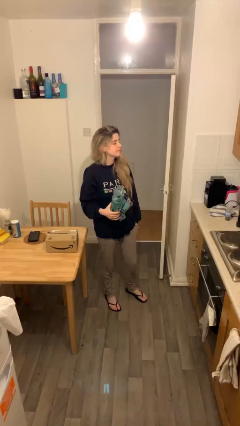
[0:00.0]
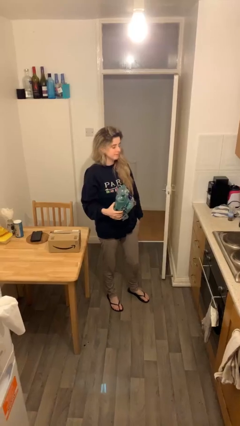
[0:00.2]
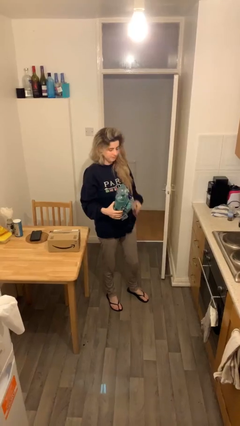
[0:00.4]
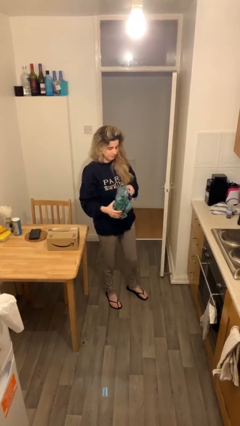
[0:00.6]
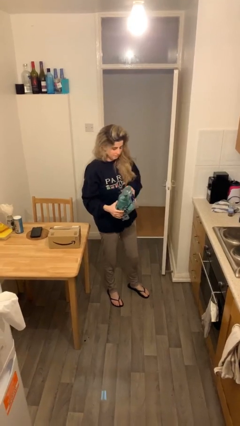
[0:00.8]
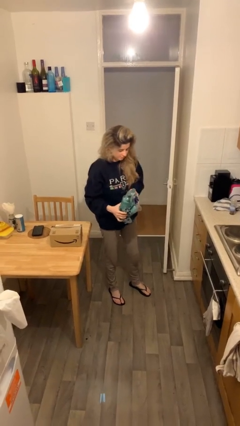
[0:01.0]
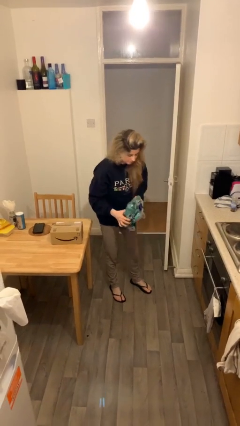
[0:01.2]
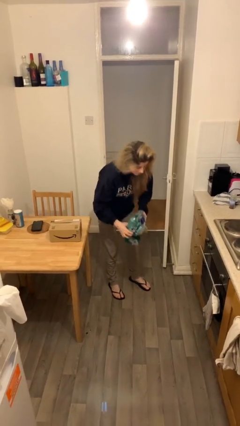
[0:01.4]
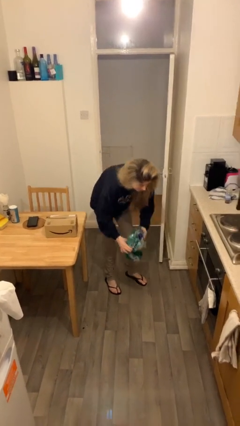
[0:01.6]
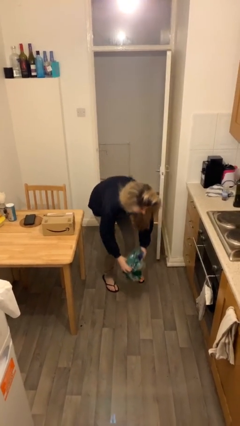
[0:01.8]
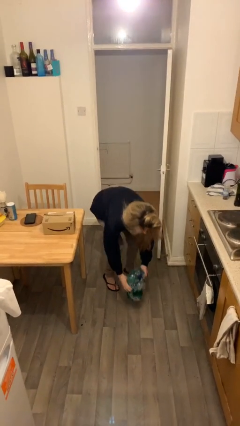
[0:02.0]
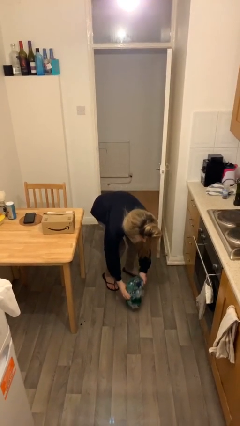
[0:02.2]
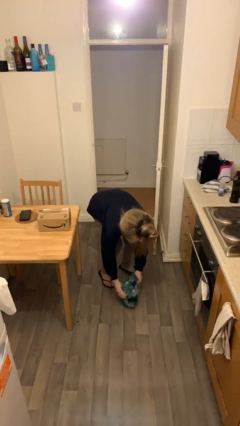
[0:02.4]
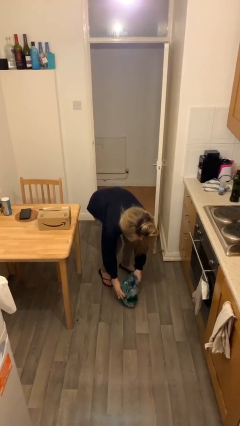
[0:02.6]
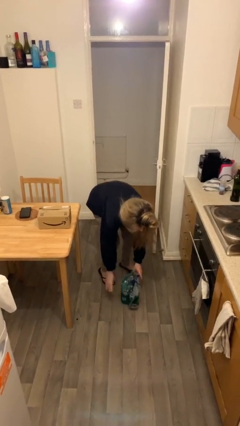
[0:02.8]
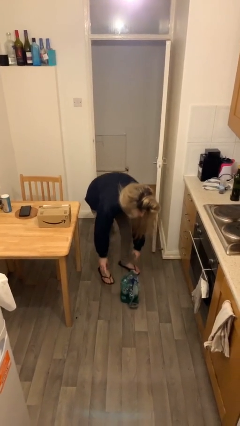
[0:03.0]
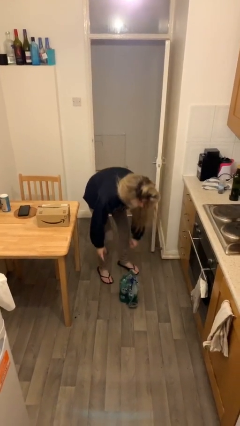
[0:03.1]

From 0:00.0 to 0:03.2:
person puts down object on floor

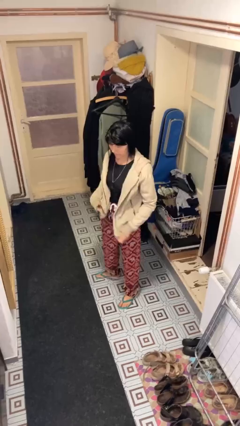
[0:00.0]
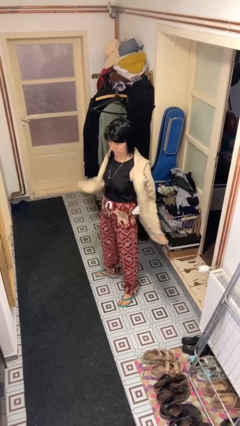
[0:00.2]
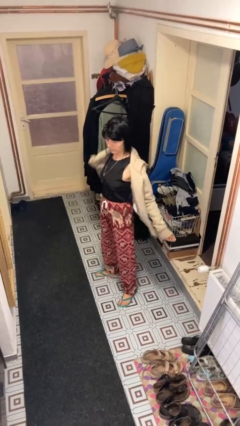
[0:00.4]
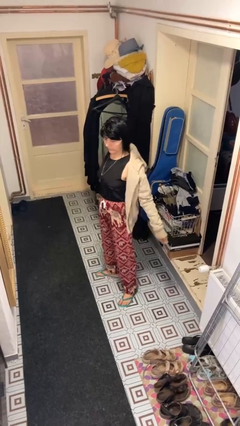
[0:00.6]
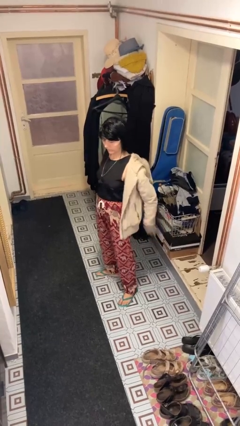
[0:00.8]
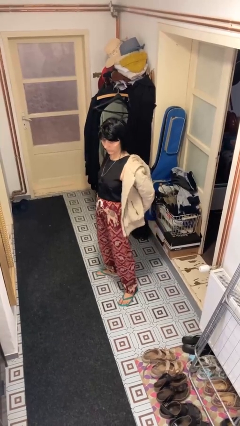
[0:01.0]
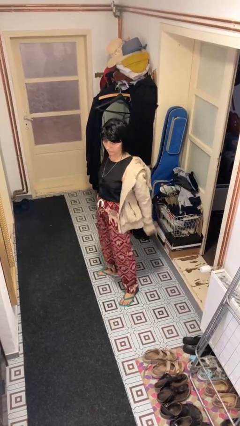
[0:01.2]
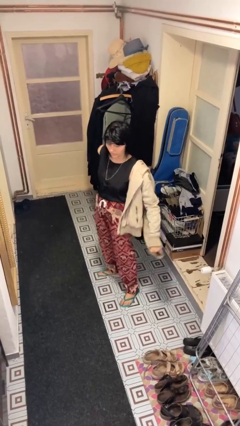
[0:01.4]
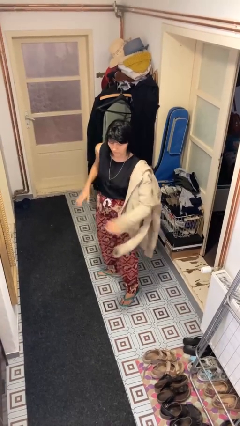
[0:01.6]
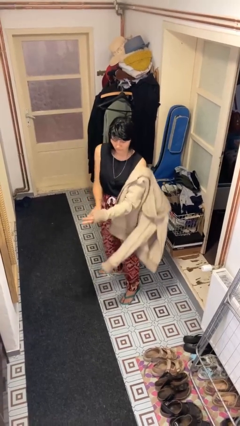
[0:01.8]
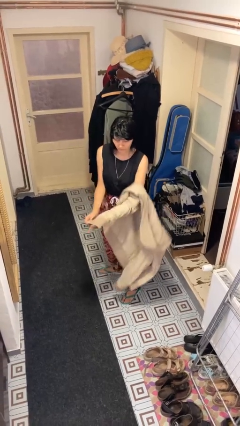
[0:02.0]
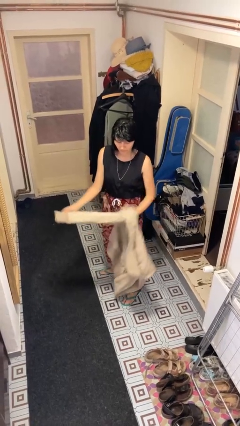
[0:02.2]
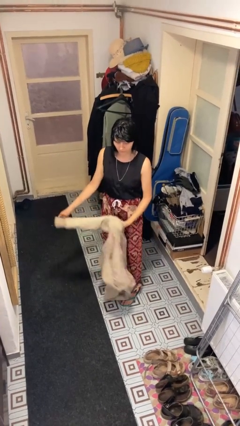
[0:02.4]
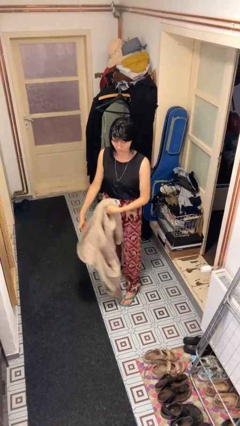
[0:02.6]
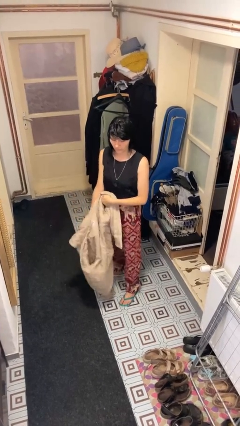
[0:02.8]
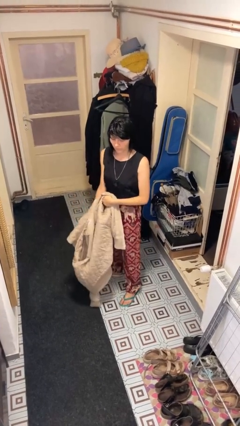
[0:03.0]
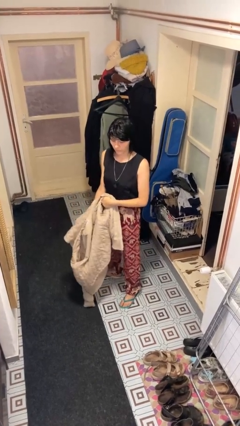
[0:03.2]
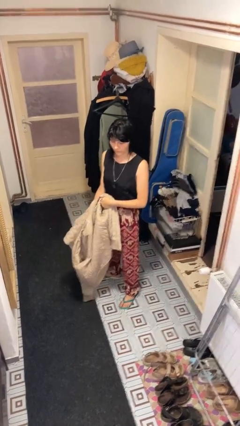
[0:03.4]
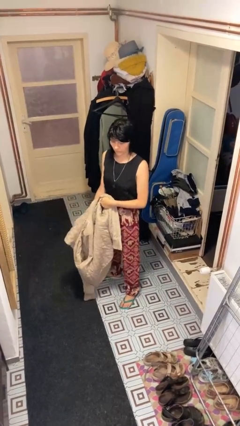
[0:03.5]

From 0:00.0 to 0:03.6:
person takes off jacket

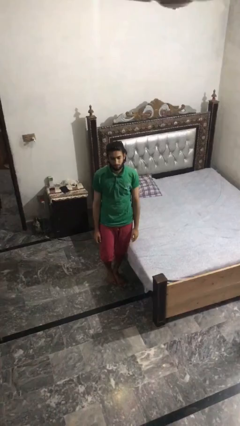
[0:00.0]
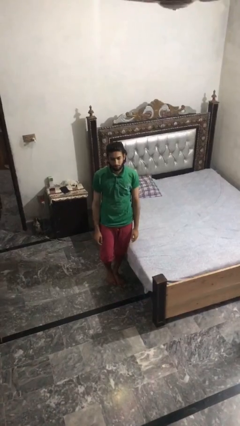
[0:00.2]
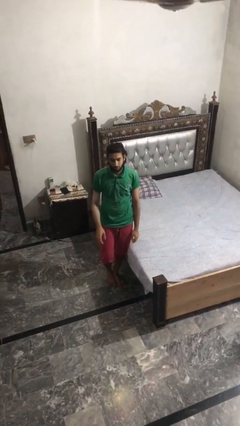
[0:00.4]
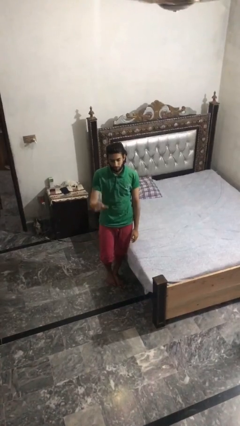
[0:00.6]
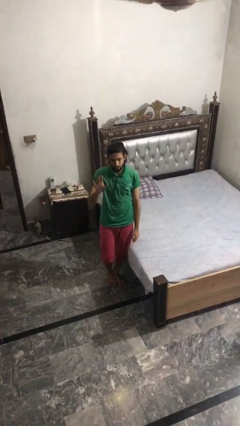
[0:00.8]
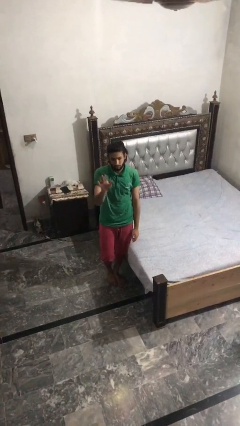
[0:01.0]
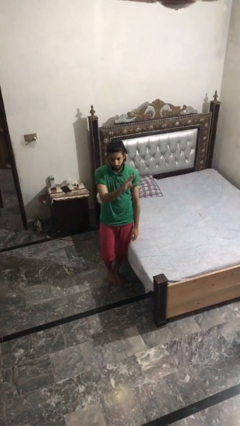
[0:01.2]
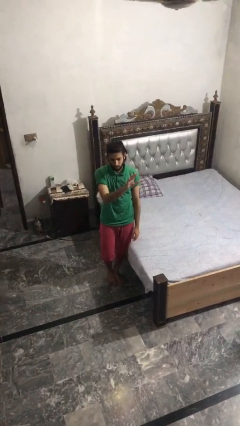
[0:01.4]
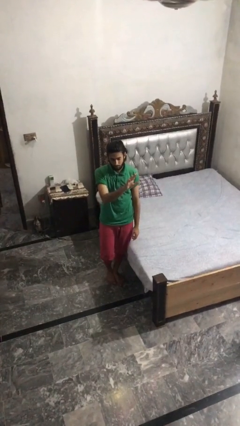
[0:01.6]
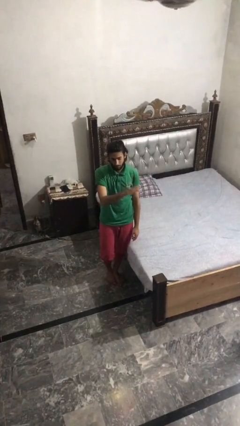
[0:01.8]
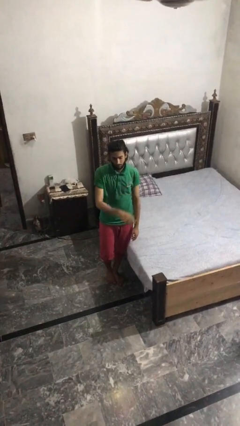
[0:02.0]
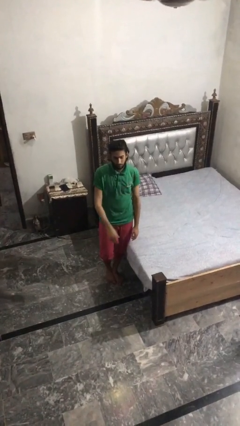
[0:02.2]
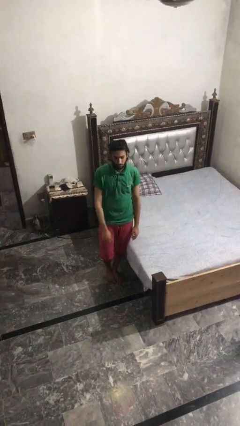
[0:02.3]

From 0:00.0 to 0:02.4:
person gestures swipe left

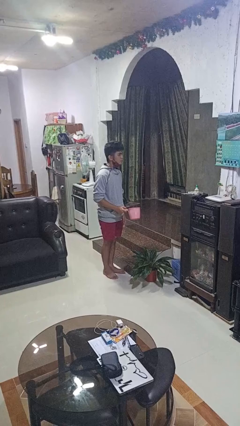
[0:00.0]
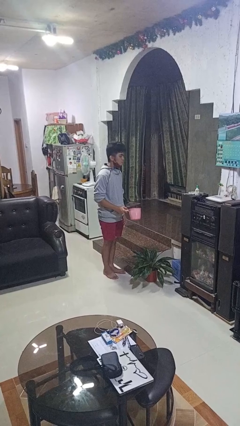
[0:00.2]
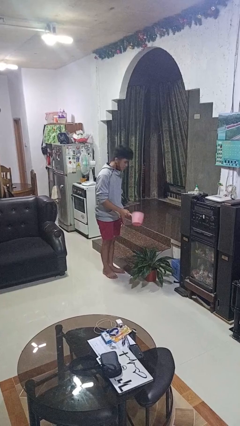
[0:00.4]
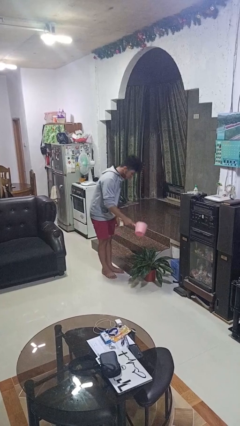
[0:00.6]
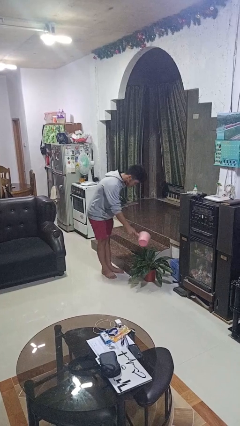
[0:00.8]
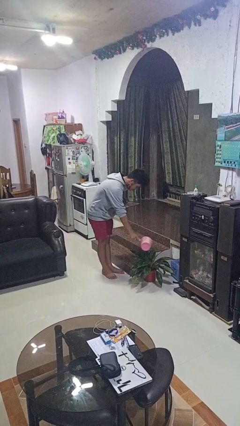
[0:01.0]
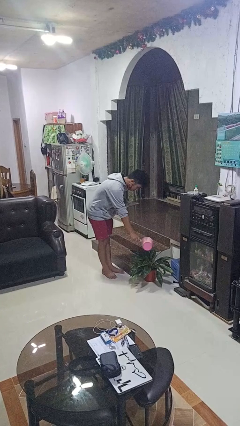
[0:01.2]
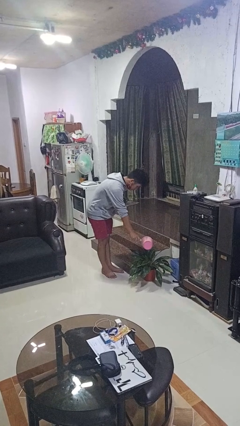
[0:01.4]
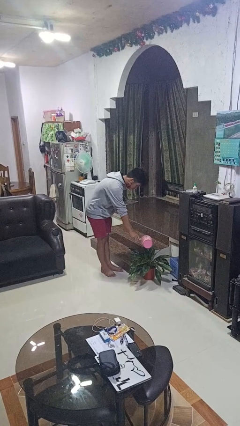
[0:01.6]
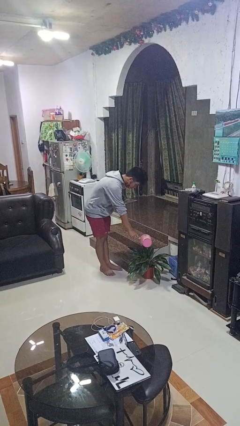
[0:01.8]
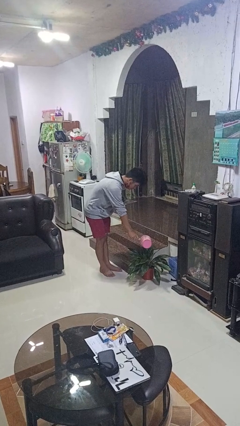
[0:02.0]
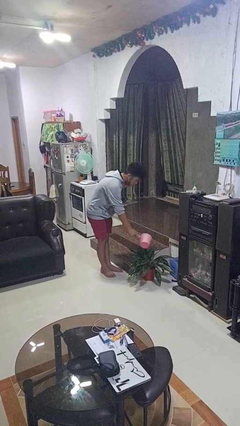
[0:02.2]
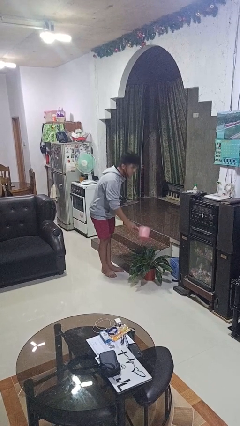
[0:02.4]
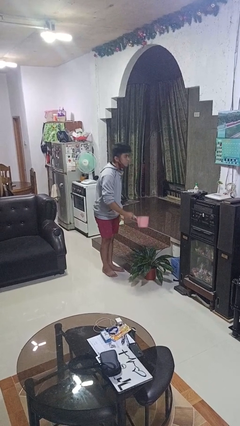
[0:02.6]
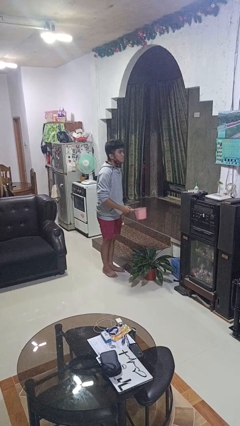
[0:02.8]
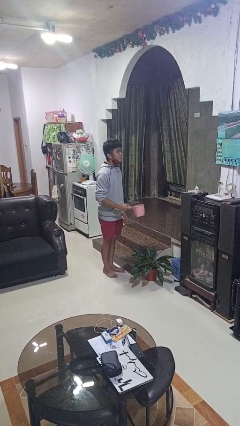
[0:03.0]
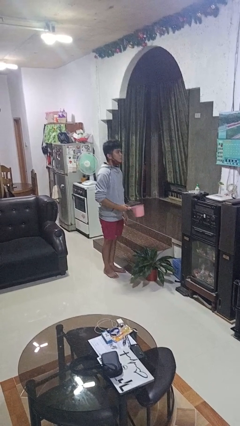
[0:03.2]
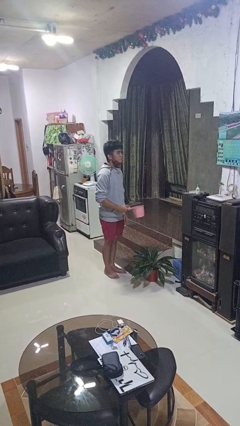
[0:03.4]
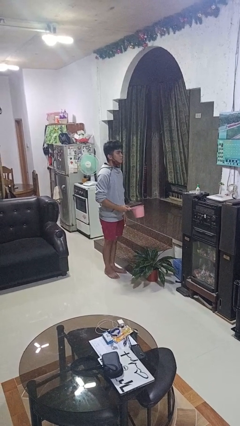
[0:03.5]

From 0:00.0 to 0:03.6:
person waters houseplant

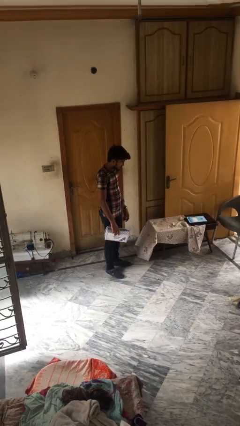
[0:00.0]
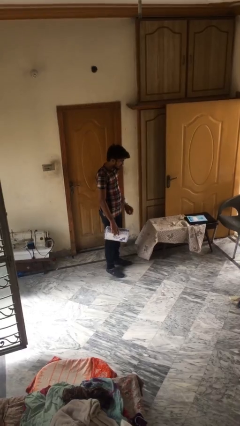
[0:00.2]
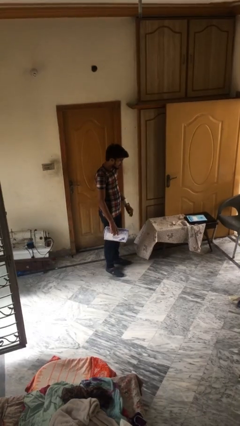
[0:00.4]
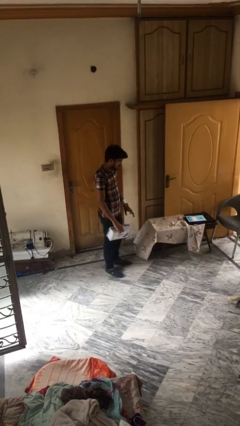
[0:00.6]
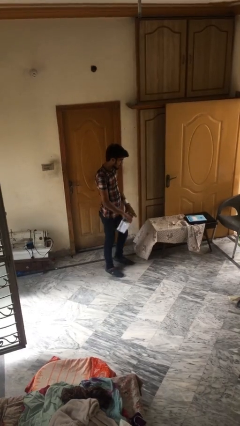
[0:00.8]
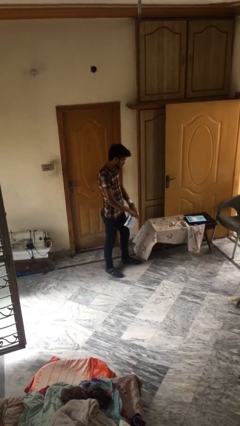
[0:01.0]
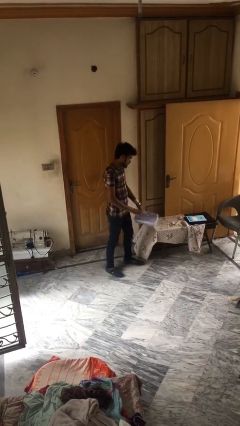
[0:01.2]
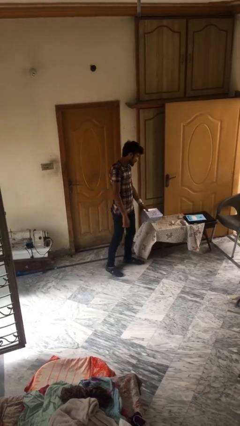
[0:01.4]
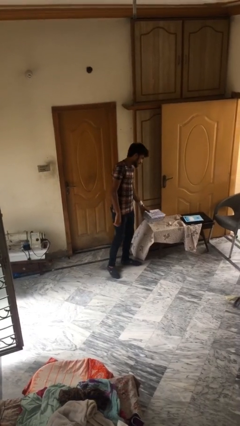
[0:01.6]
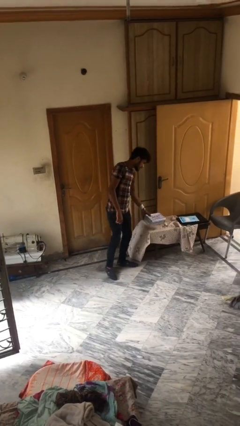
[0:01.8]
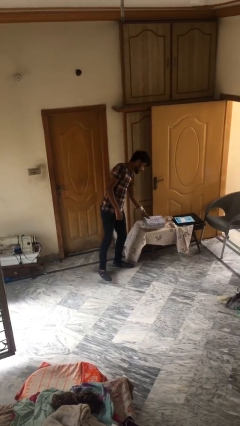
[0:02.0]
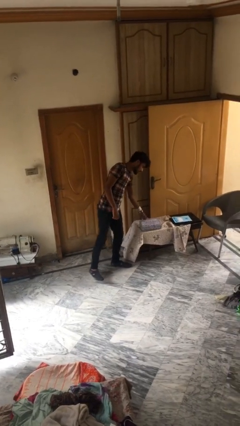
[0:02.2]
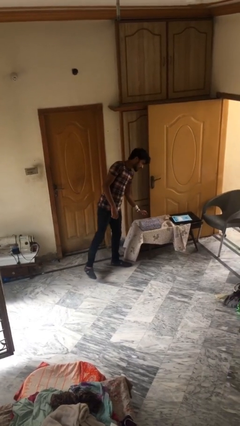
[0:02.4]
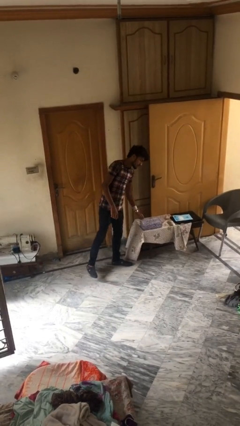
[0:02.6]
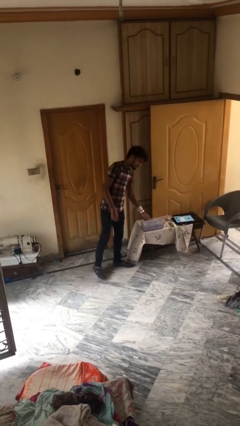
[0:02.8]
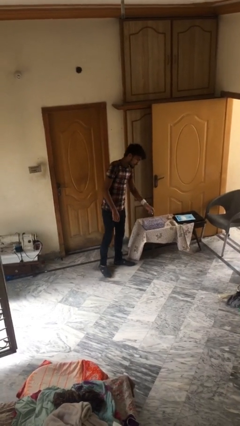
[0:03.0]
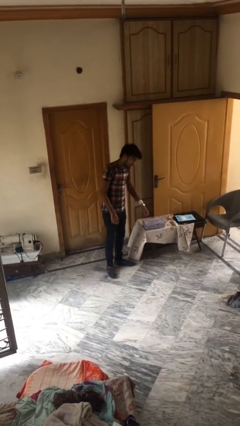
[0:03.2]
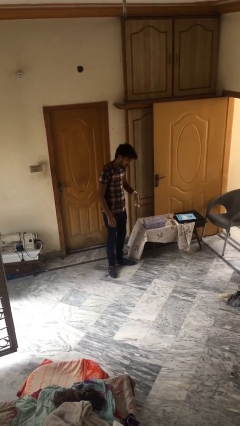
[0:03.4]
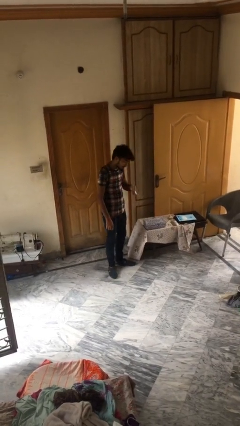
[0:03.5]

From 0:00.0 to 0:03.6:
person puts down object on table

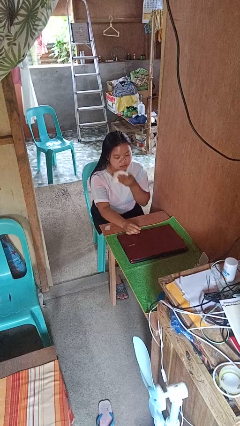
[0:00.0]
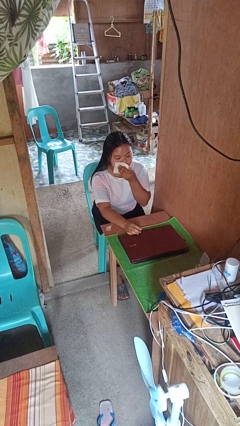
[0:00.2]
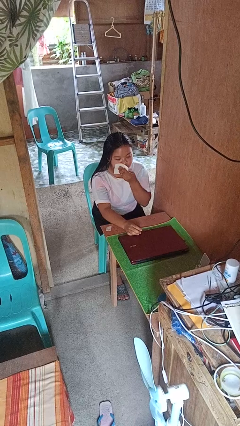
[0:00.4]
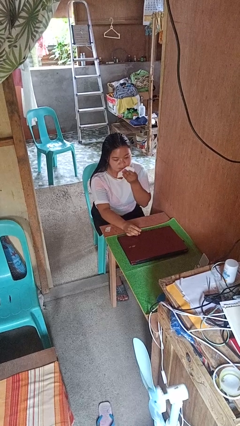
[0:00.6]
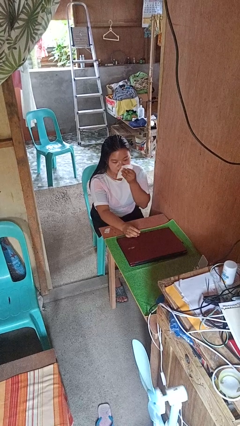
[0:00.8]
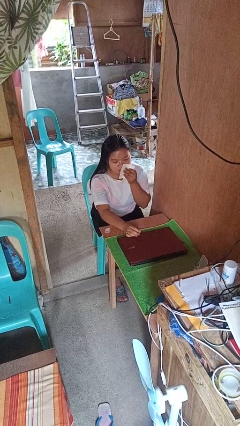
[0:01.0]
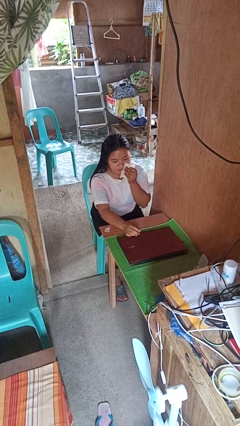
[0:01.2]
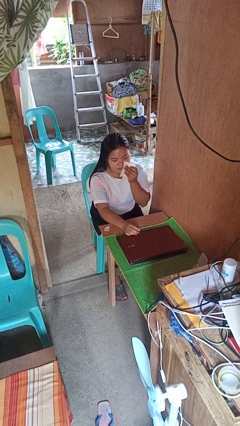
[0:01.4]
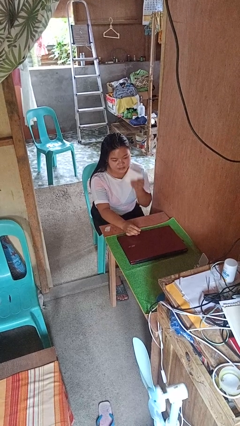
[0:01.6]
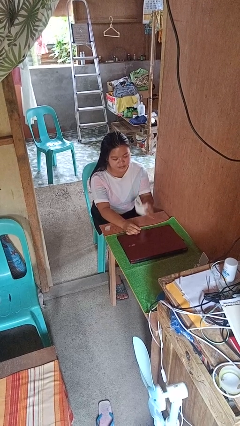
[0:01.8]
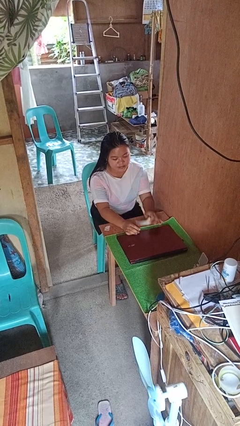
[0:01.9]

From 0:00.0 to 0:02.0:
person wipes mouth with napkin
